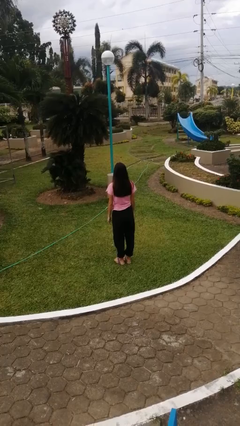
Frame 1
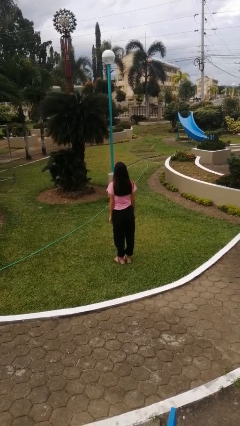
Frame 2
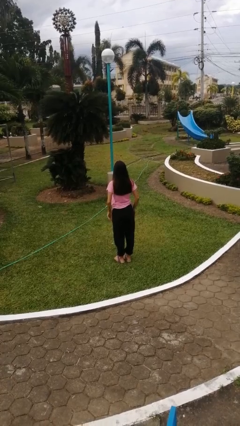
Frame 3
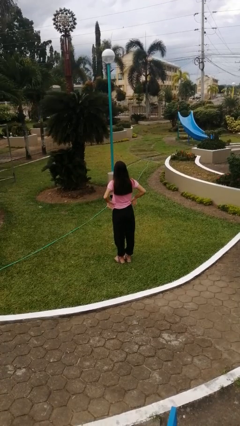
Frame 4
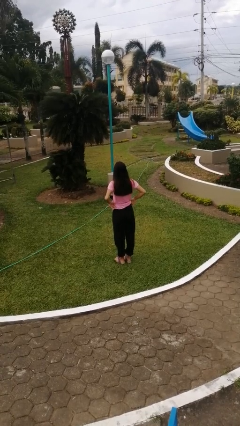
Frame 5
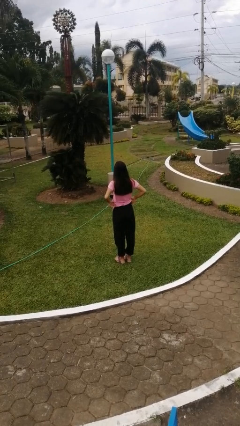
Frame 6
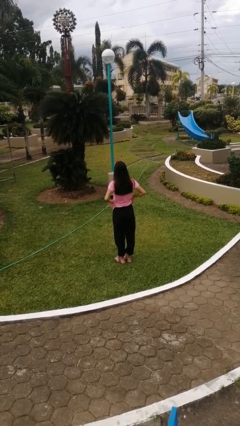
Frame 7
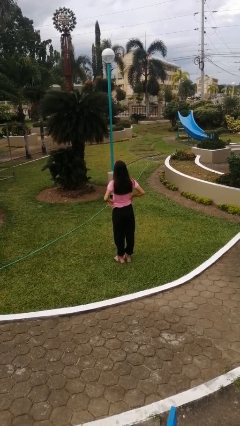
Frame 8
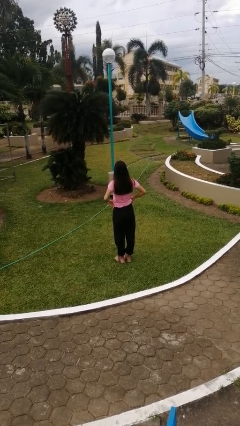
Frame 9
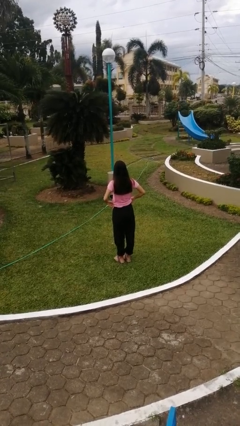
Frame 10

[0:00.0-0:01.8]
person hikes up pants

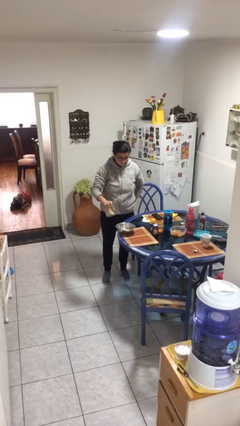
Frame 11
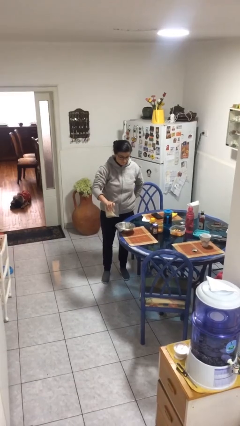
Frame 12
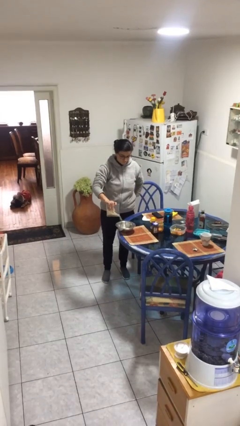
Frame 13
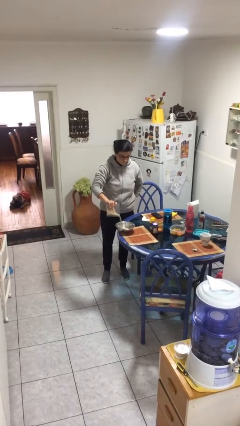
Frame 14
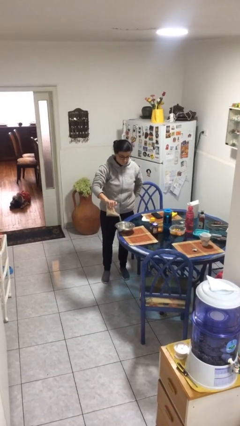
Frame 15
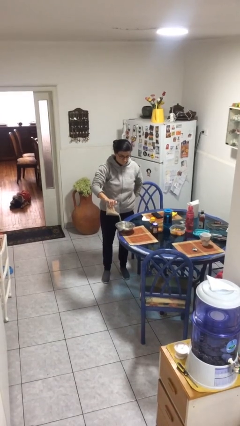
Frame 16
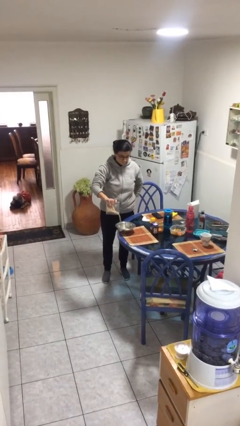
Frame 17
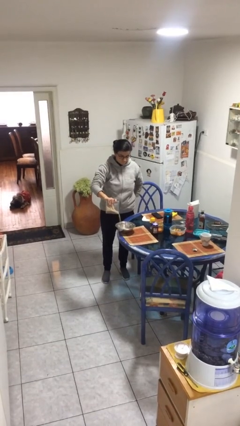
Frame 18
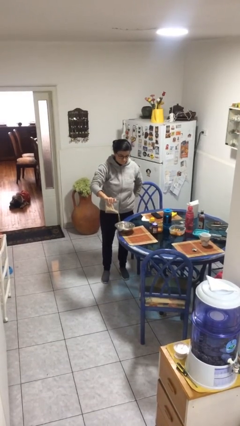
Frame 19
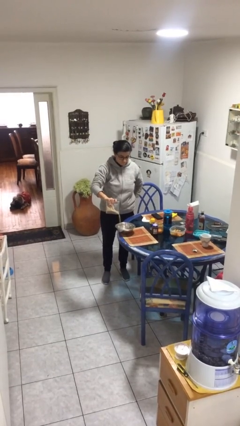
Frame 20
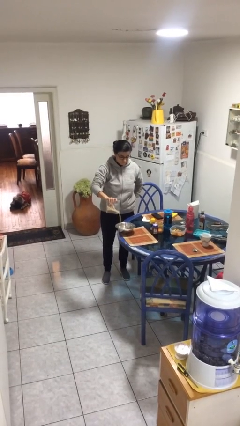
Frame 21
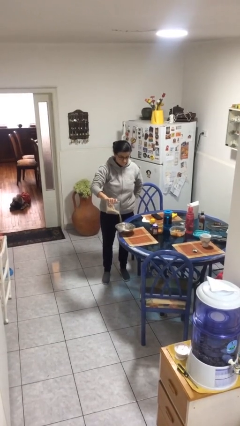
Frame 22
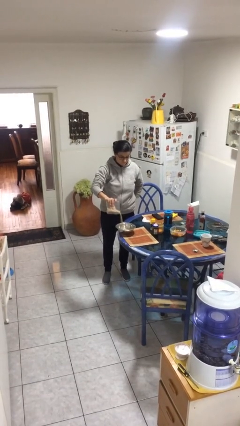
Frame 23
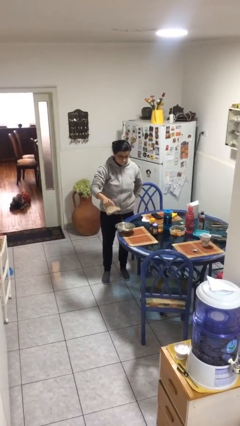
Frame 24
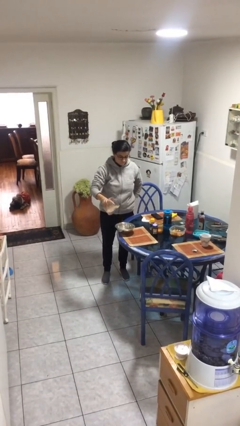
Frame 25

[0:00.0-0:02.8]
person pours into bowl

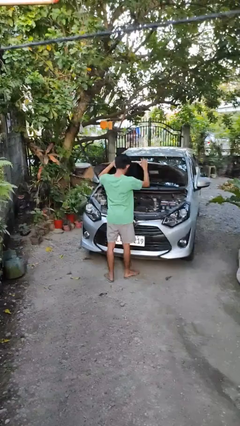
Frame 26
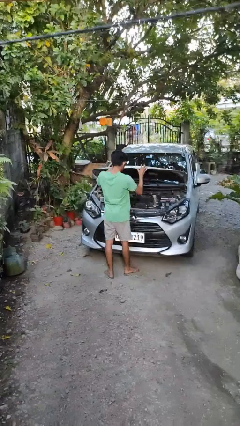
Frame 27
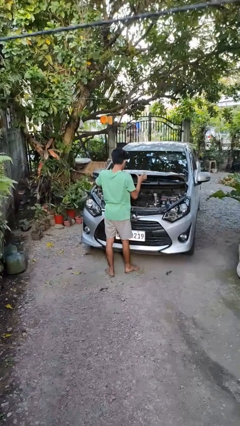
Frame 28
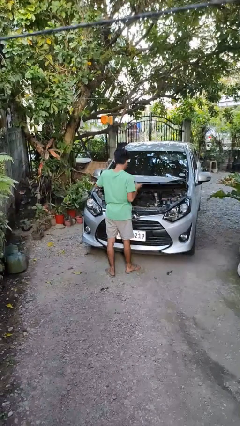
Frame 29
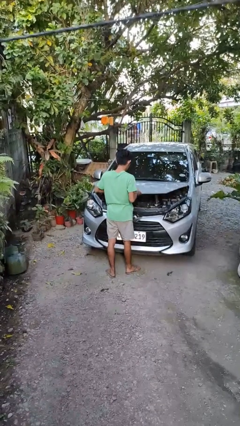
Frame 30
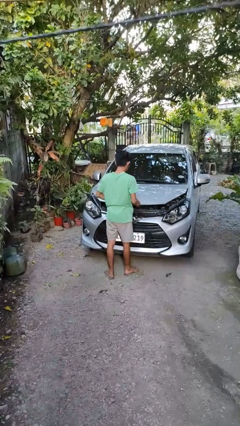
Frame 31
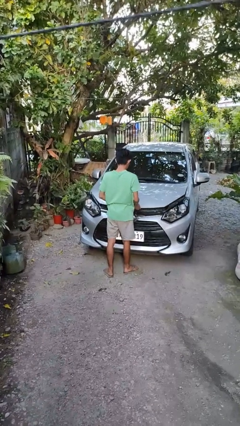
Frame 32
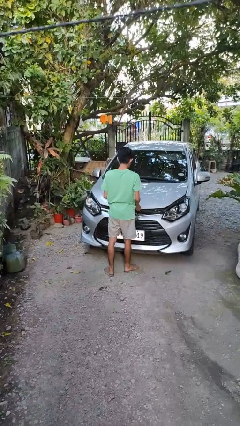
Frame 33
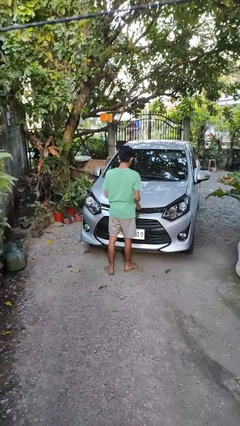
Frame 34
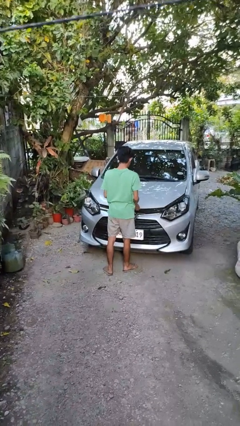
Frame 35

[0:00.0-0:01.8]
person closes car hood

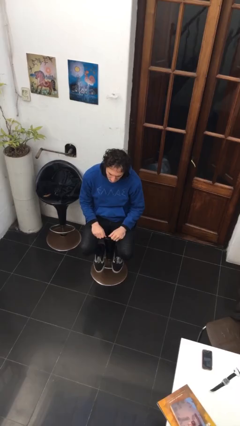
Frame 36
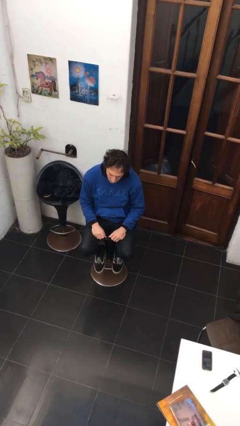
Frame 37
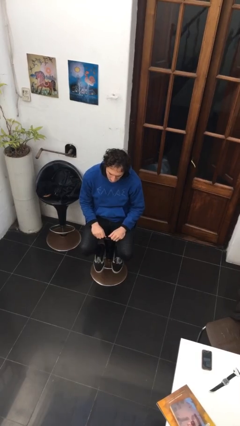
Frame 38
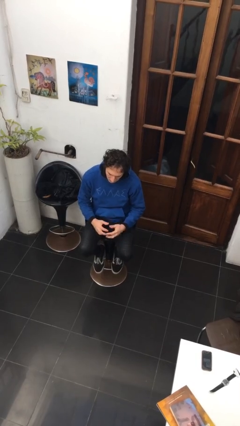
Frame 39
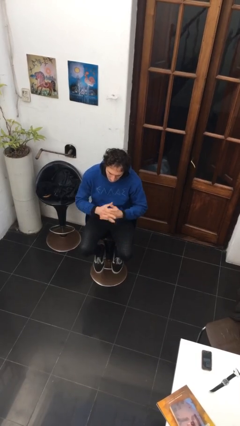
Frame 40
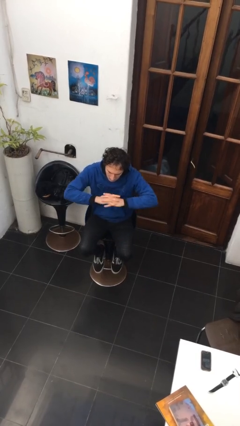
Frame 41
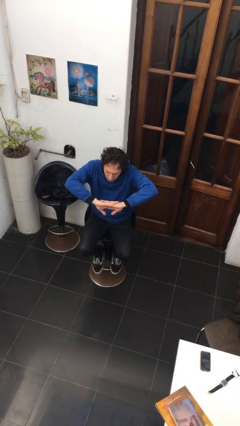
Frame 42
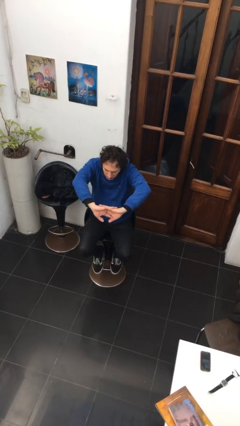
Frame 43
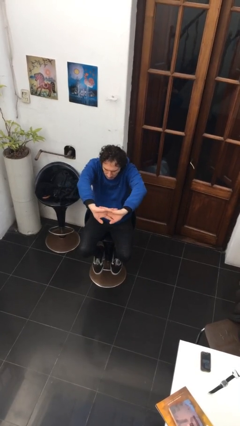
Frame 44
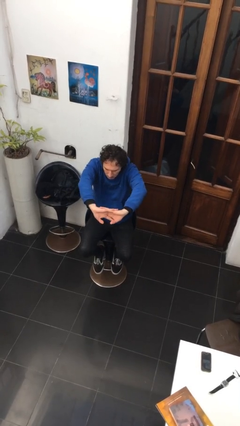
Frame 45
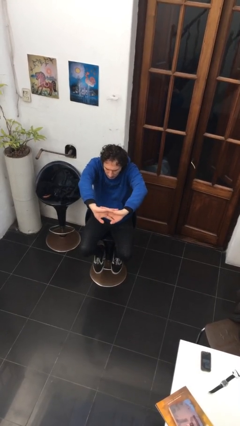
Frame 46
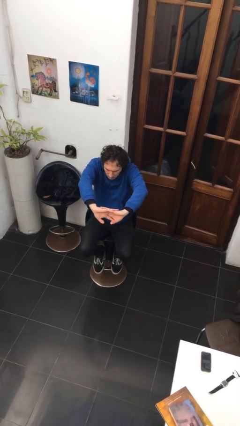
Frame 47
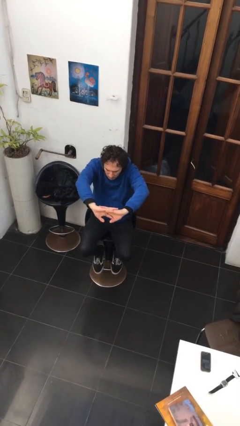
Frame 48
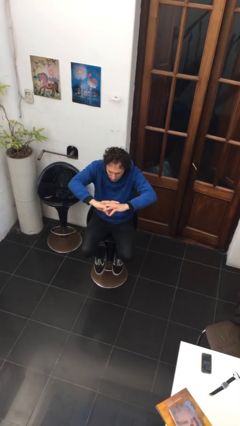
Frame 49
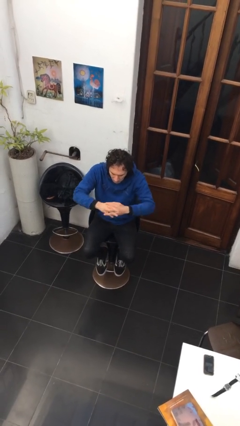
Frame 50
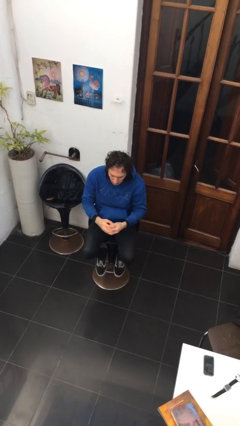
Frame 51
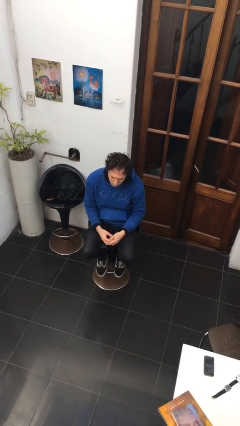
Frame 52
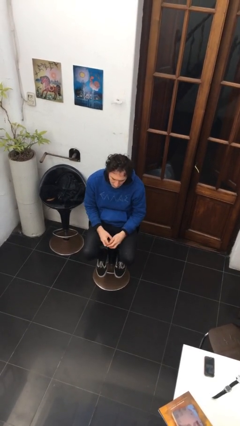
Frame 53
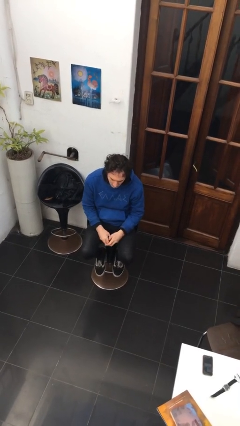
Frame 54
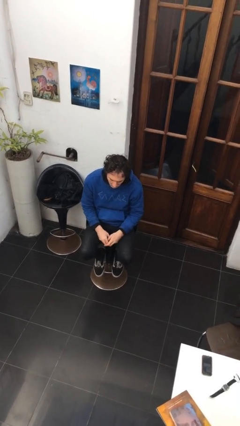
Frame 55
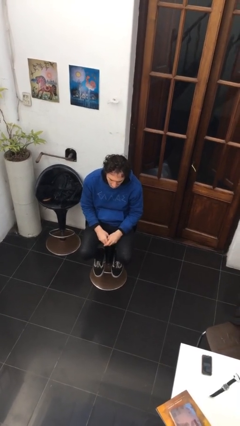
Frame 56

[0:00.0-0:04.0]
person cracks knuckles

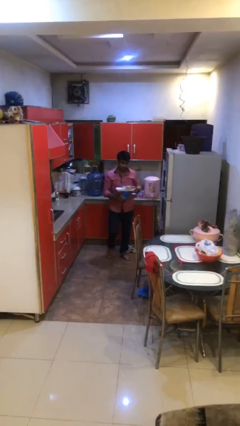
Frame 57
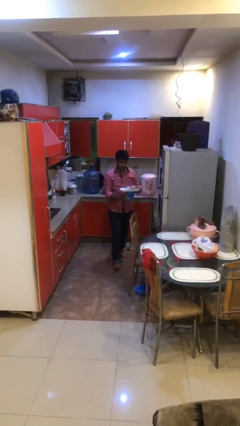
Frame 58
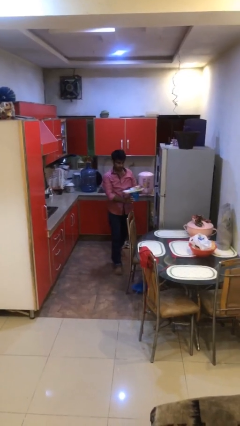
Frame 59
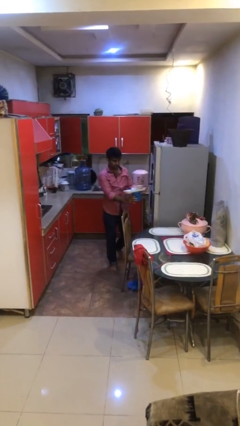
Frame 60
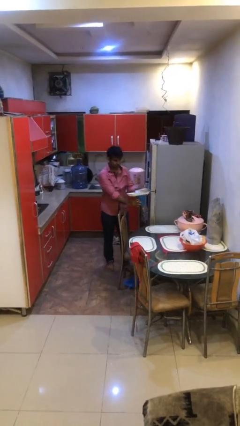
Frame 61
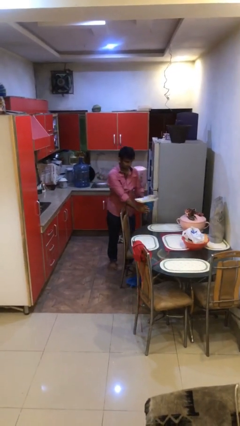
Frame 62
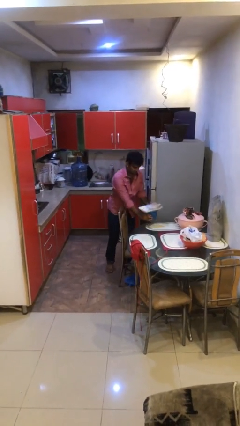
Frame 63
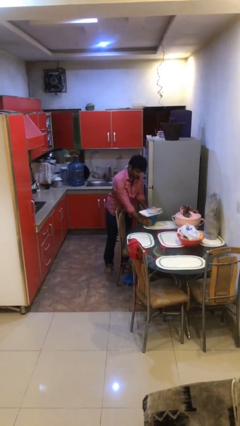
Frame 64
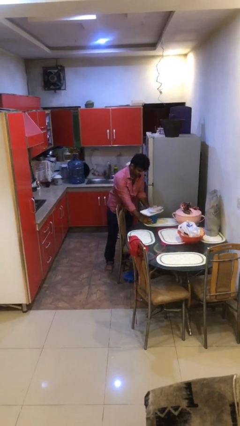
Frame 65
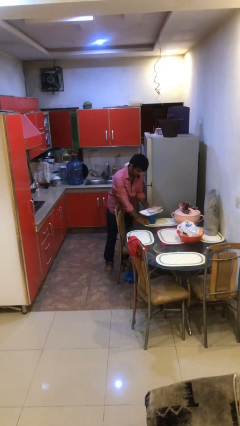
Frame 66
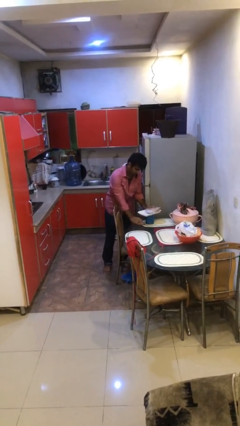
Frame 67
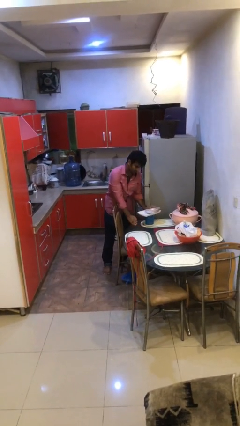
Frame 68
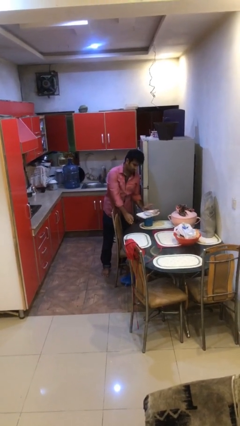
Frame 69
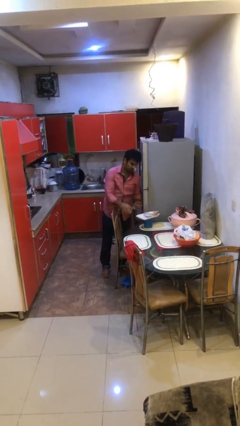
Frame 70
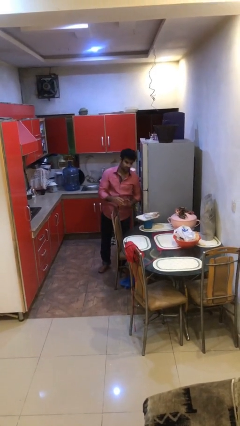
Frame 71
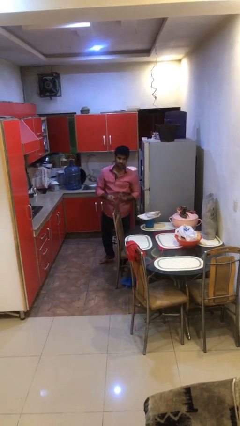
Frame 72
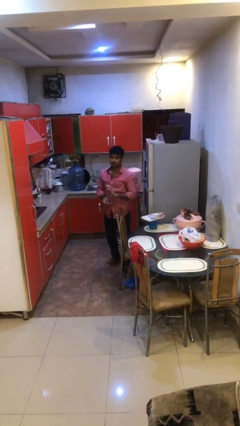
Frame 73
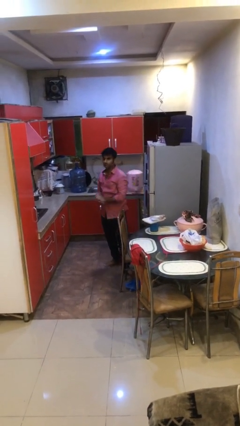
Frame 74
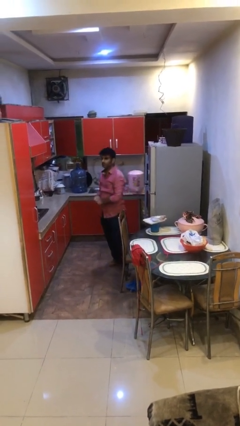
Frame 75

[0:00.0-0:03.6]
person puts down object on table

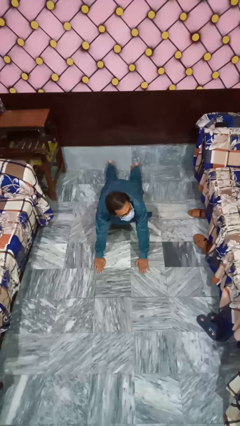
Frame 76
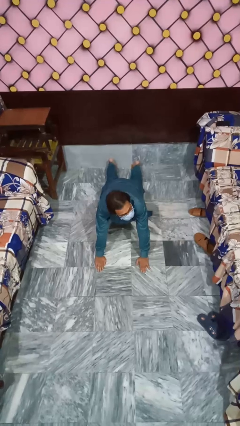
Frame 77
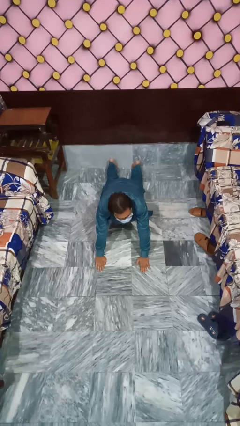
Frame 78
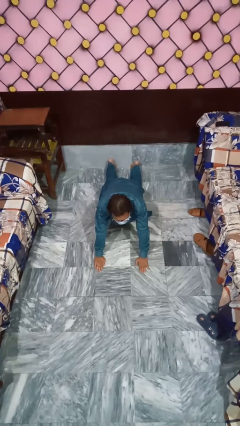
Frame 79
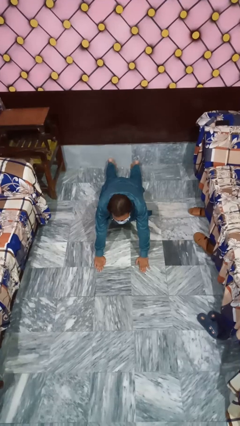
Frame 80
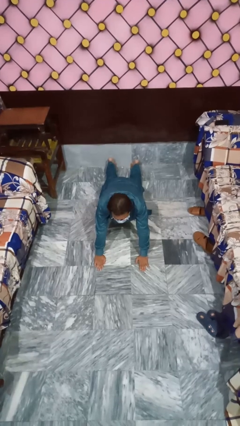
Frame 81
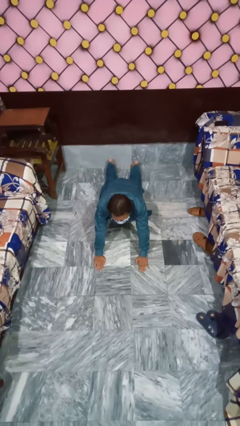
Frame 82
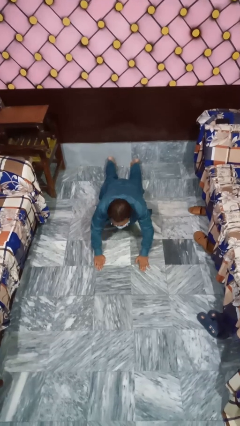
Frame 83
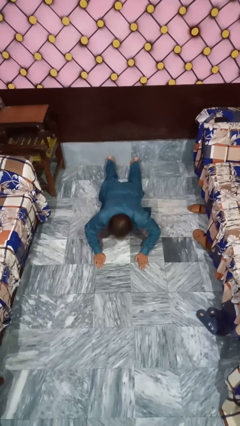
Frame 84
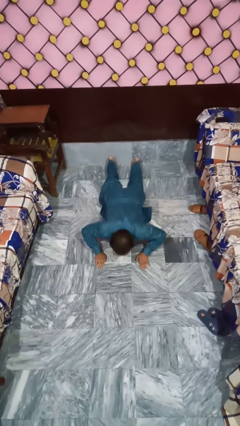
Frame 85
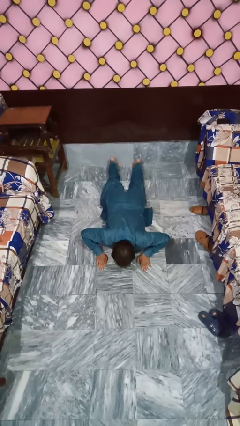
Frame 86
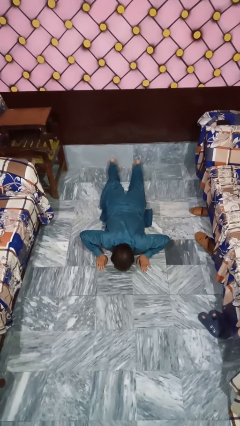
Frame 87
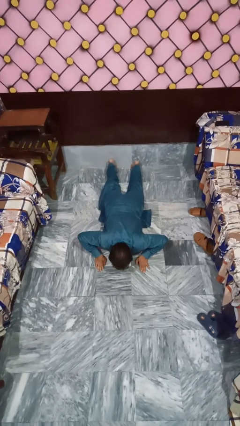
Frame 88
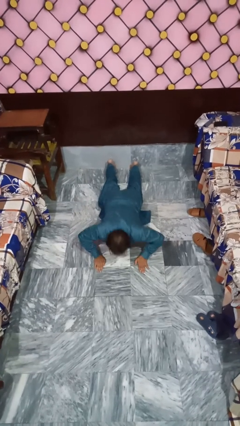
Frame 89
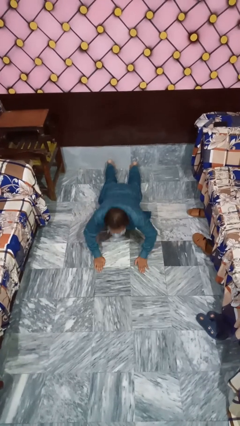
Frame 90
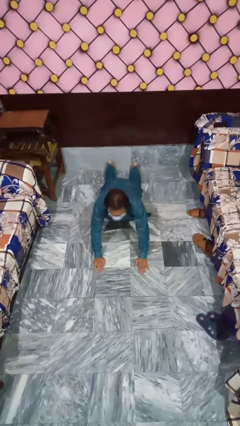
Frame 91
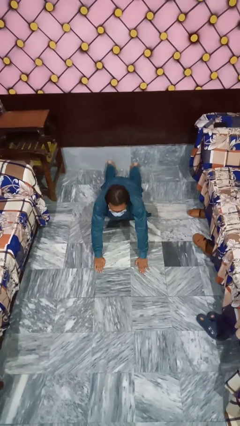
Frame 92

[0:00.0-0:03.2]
person exercises with pushup

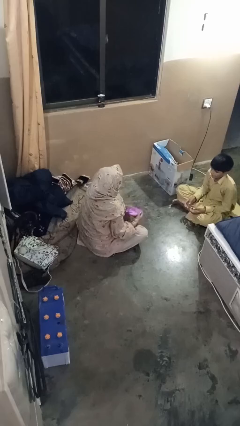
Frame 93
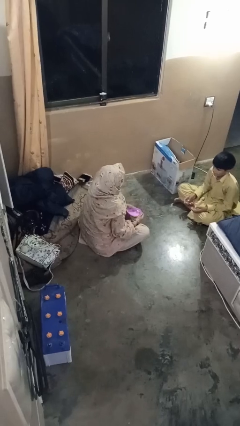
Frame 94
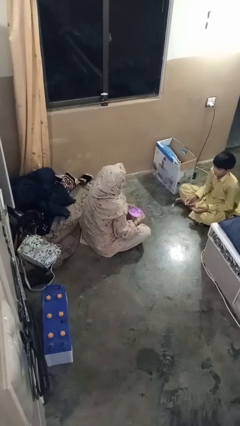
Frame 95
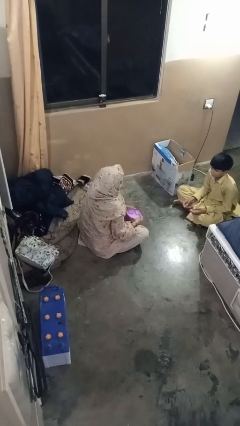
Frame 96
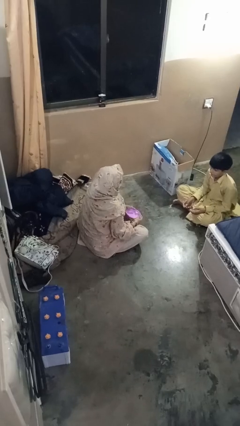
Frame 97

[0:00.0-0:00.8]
person catches object from person
